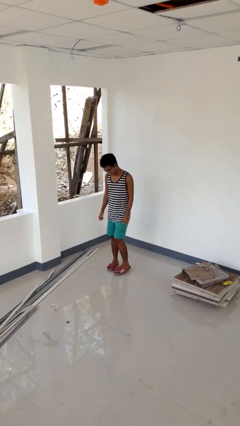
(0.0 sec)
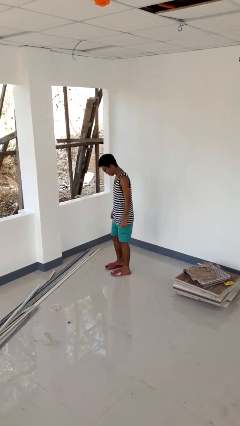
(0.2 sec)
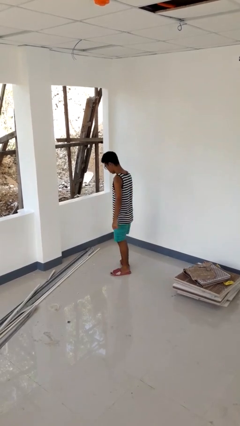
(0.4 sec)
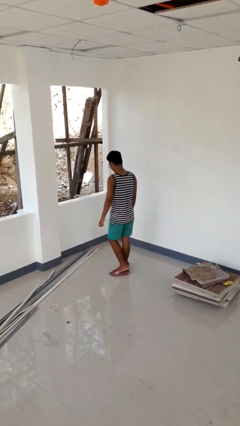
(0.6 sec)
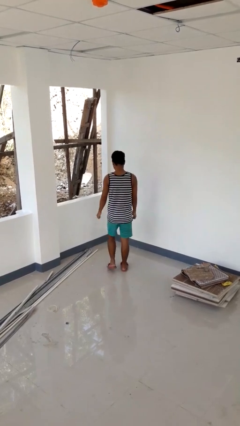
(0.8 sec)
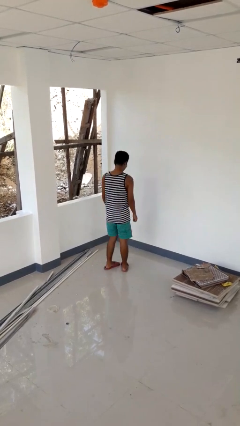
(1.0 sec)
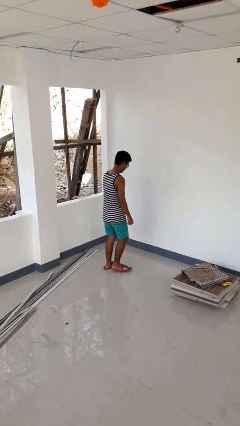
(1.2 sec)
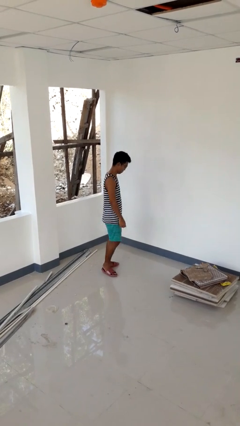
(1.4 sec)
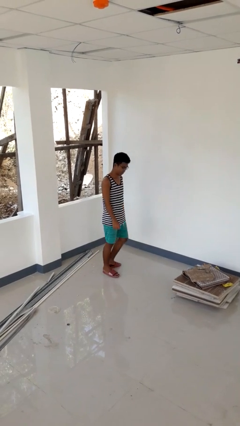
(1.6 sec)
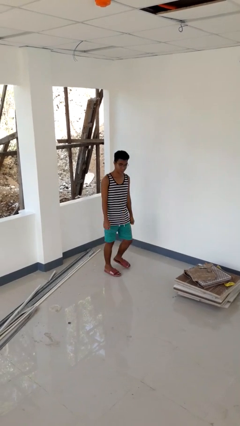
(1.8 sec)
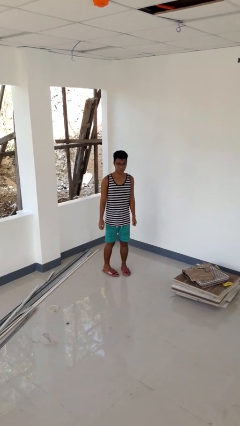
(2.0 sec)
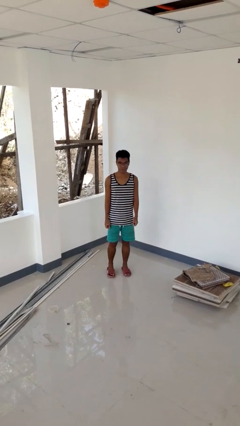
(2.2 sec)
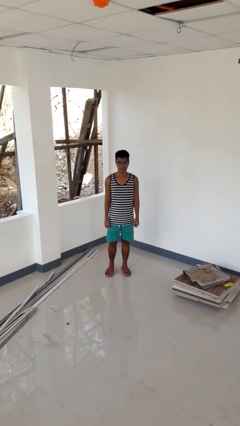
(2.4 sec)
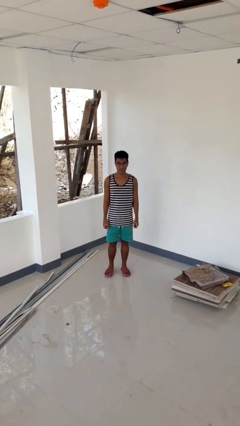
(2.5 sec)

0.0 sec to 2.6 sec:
person twirls

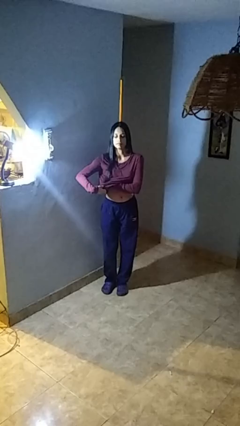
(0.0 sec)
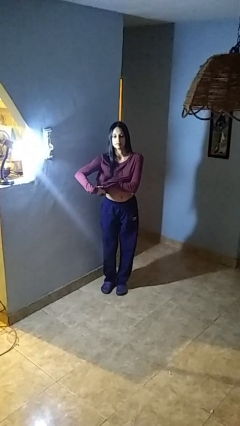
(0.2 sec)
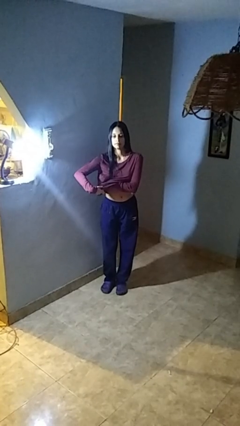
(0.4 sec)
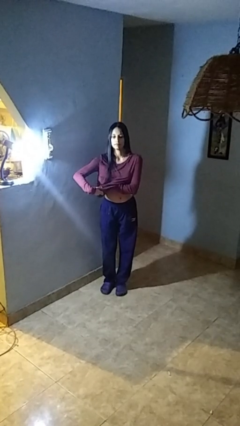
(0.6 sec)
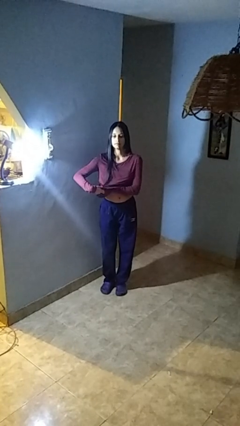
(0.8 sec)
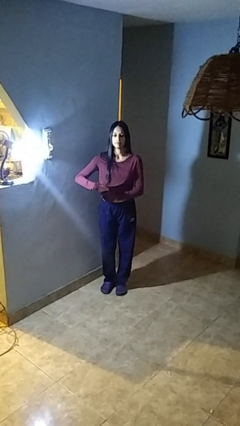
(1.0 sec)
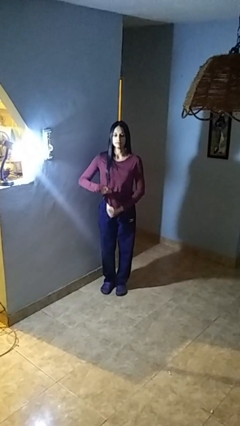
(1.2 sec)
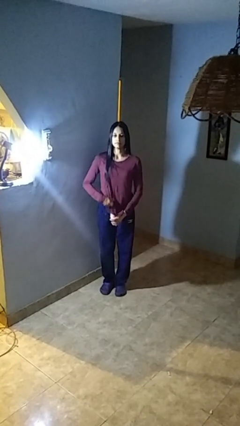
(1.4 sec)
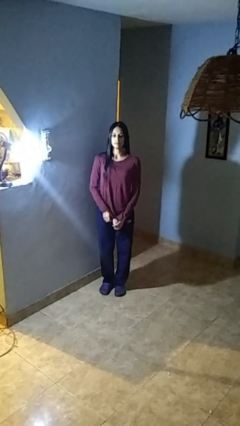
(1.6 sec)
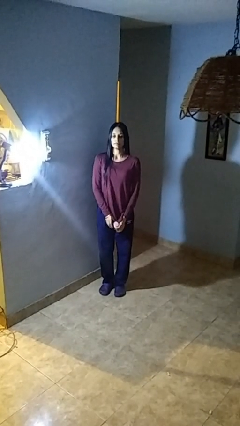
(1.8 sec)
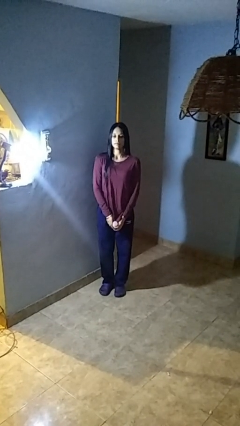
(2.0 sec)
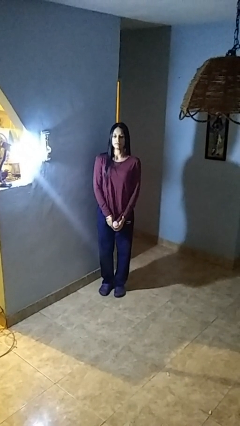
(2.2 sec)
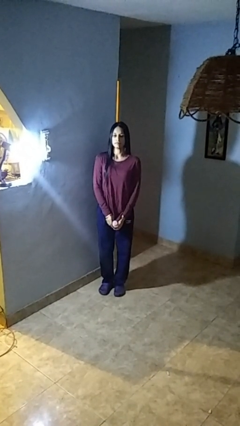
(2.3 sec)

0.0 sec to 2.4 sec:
person applies deodorant

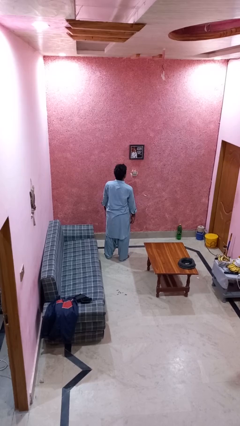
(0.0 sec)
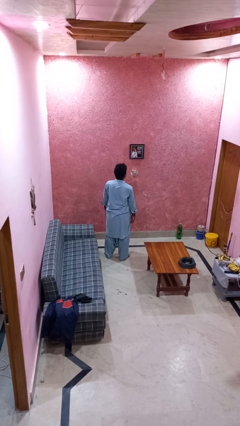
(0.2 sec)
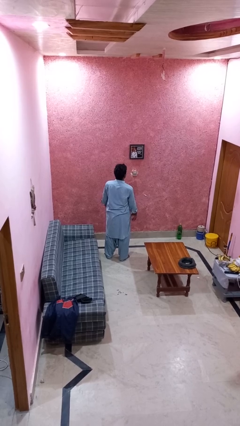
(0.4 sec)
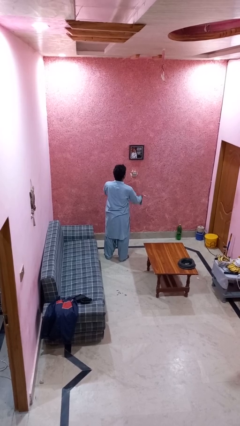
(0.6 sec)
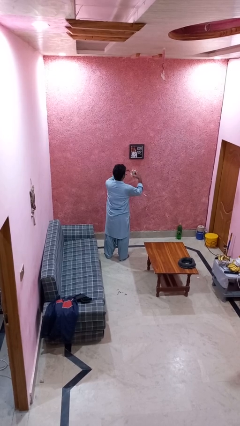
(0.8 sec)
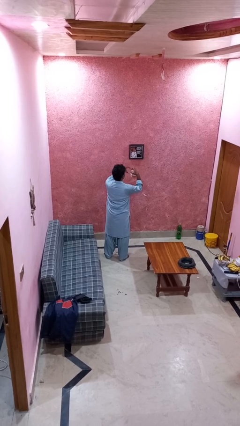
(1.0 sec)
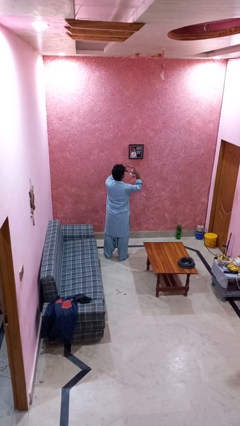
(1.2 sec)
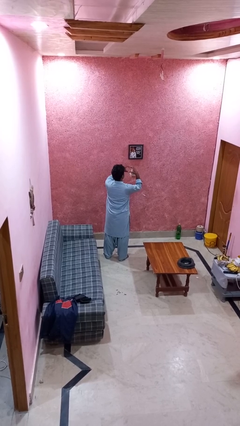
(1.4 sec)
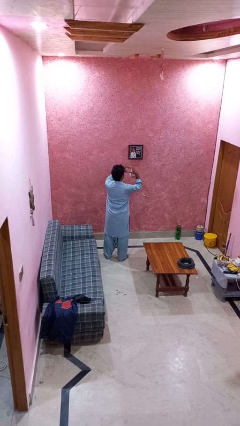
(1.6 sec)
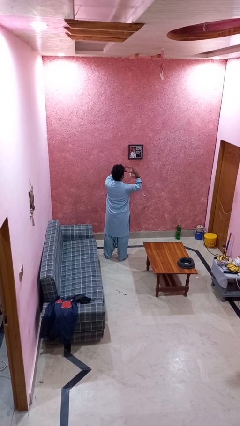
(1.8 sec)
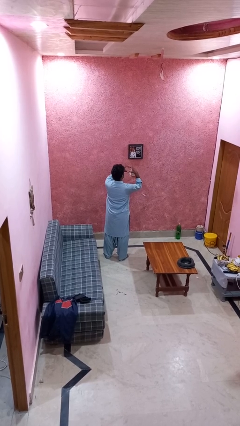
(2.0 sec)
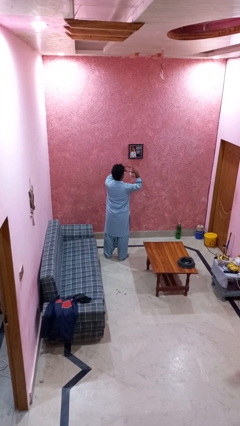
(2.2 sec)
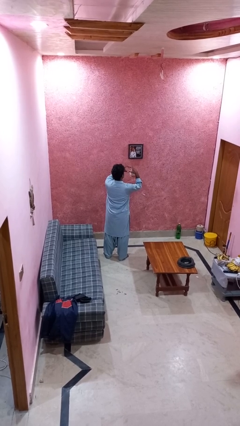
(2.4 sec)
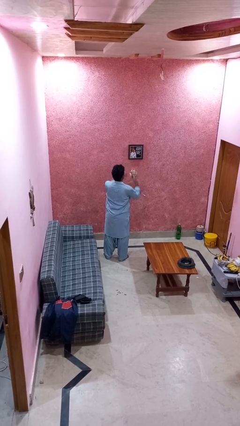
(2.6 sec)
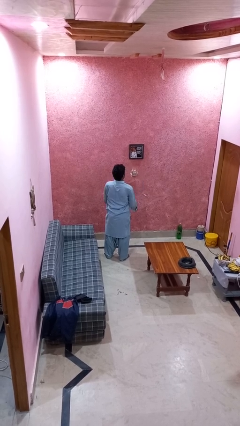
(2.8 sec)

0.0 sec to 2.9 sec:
person gestures heart

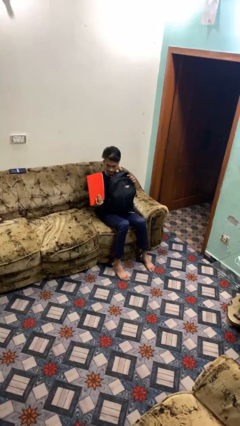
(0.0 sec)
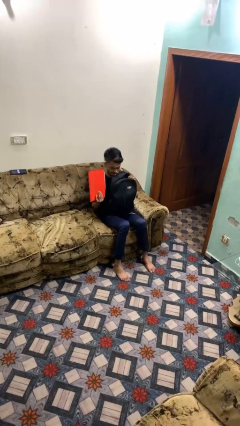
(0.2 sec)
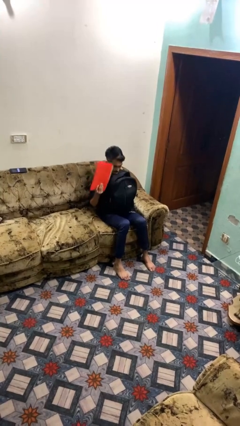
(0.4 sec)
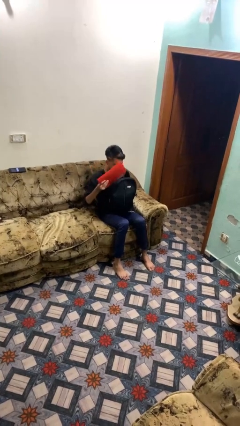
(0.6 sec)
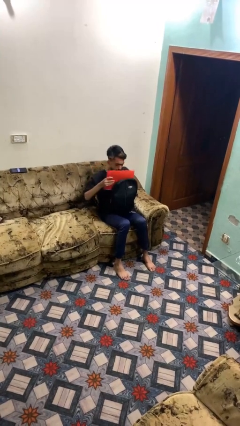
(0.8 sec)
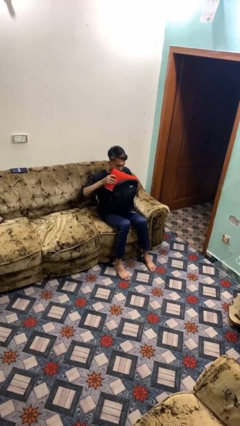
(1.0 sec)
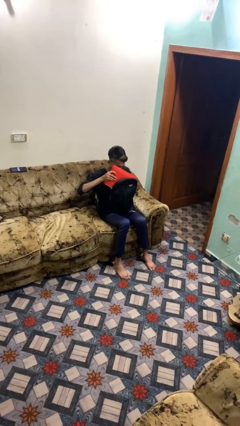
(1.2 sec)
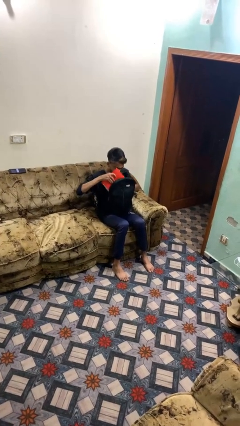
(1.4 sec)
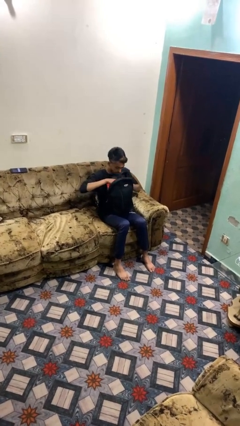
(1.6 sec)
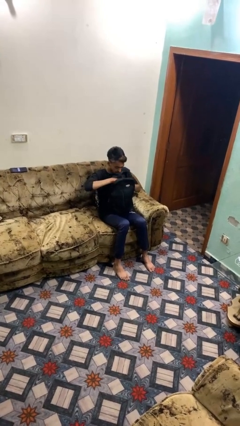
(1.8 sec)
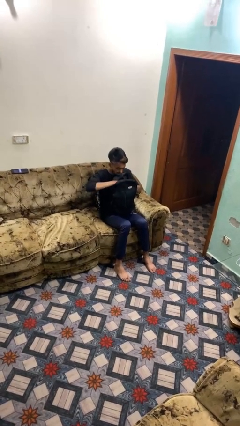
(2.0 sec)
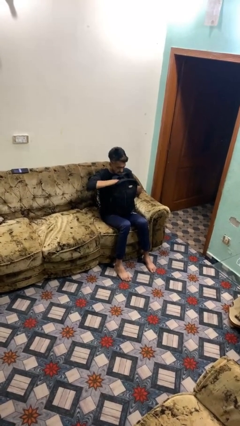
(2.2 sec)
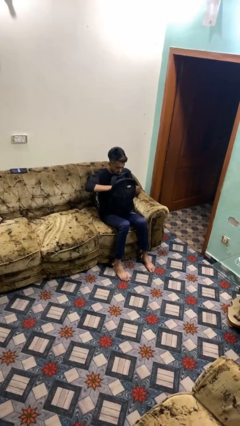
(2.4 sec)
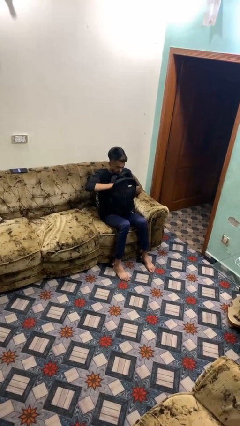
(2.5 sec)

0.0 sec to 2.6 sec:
person puts object into backpack

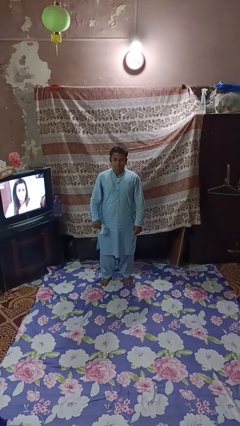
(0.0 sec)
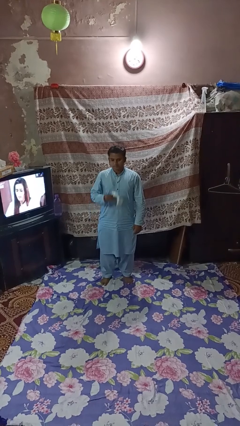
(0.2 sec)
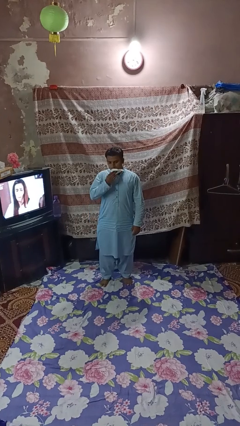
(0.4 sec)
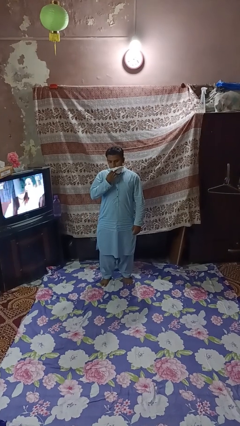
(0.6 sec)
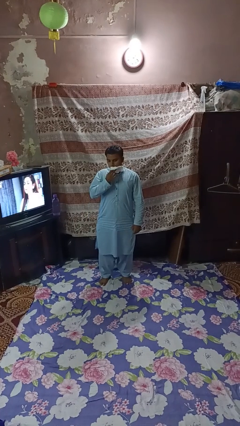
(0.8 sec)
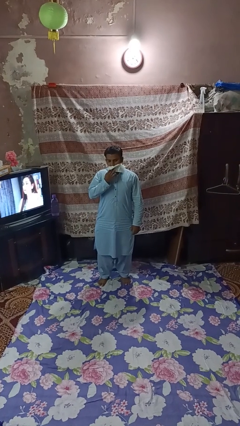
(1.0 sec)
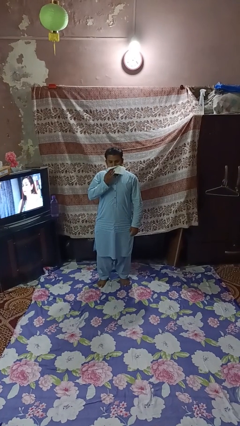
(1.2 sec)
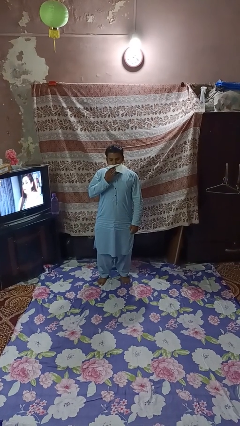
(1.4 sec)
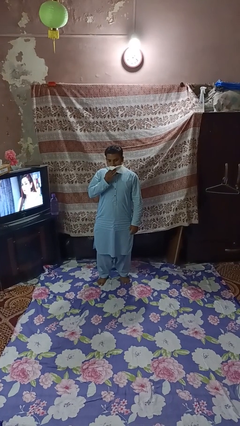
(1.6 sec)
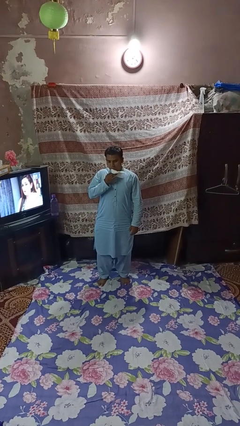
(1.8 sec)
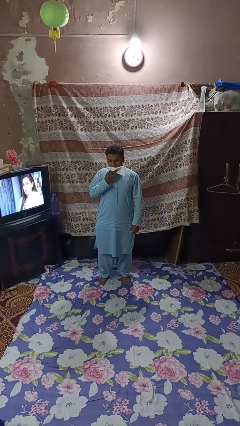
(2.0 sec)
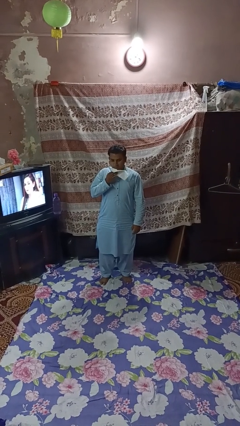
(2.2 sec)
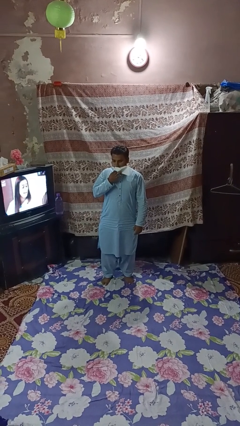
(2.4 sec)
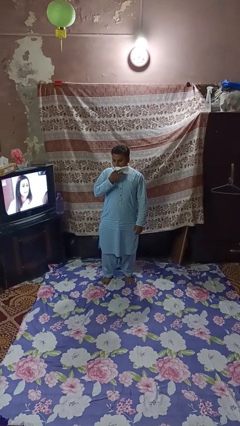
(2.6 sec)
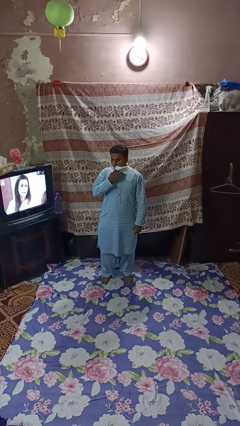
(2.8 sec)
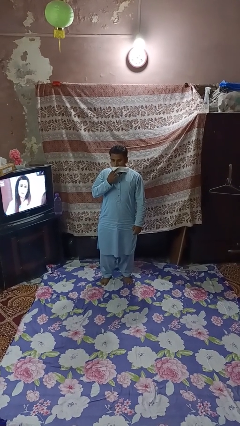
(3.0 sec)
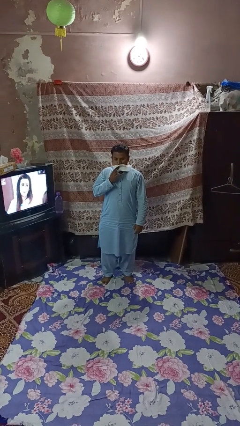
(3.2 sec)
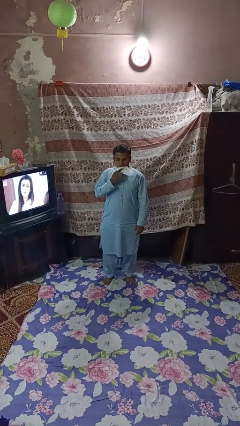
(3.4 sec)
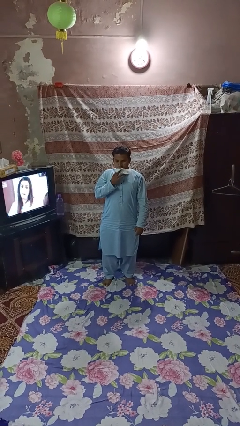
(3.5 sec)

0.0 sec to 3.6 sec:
person wipes mouth with napkin

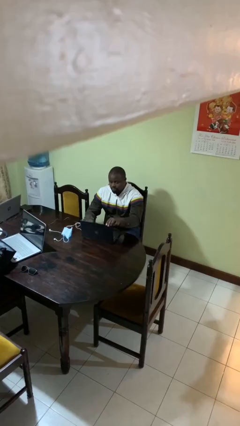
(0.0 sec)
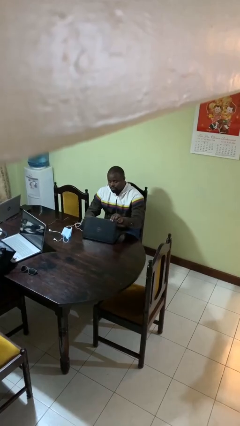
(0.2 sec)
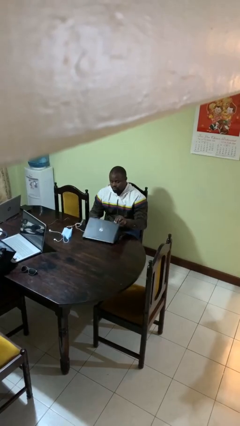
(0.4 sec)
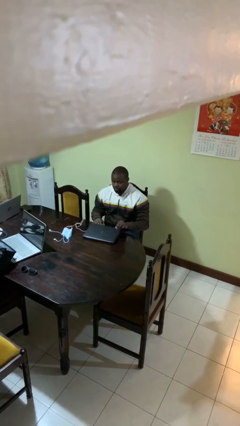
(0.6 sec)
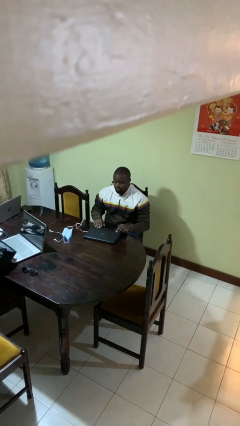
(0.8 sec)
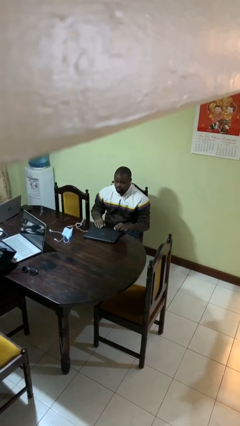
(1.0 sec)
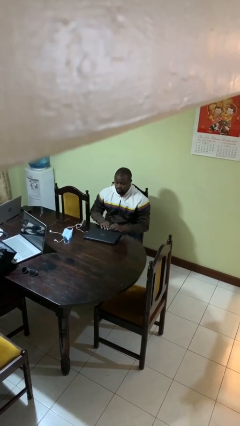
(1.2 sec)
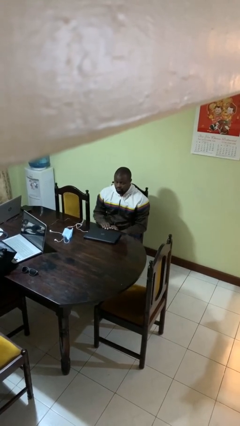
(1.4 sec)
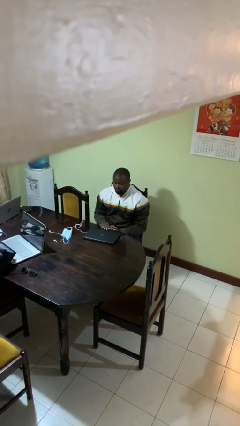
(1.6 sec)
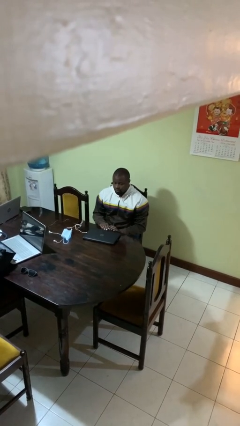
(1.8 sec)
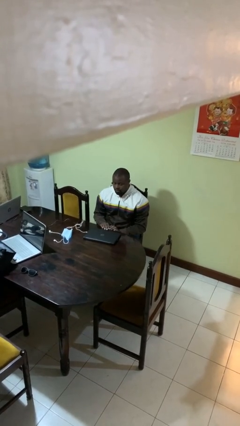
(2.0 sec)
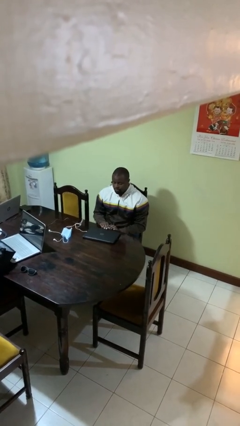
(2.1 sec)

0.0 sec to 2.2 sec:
person closes laptop

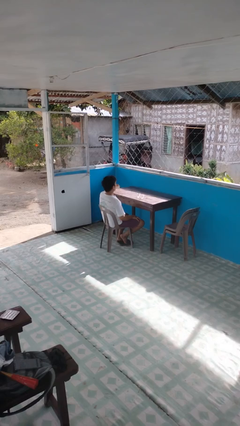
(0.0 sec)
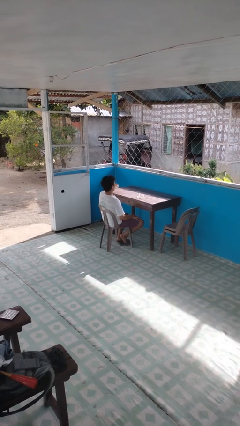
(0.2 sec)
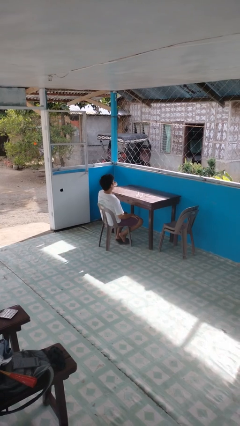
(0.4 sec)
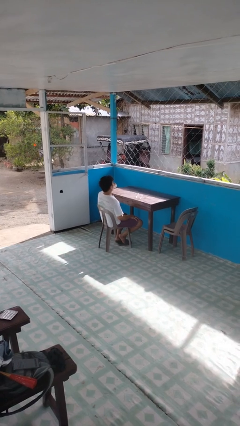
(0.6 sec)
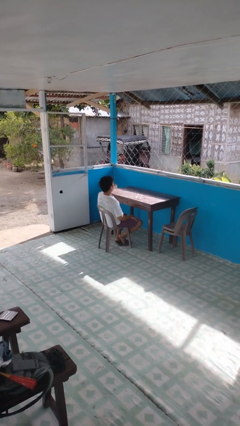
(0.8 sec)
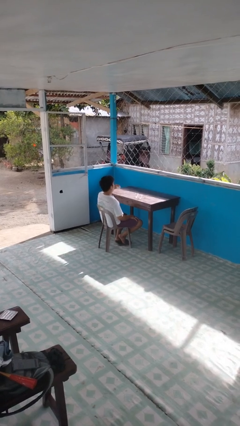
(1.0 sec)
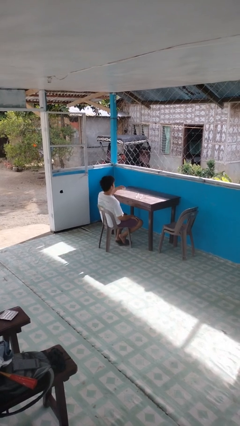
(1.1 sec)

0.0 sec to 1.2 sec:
person drinks from shotglass
